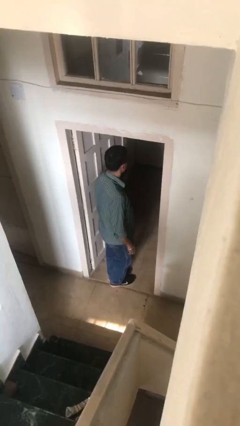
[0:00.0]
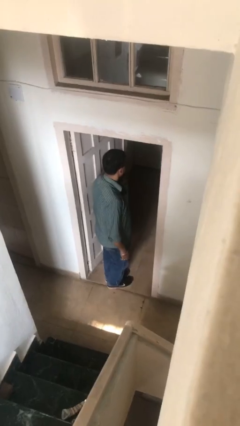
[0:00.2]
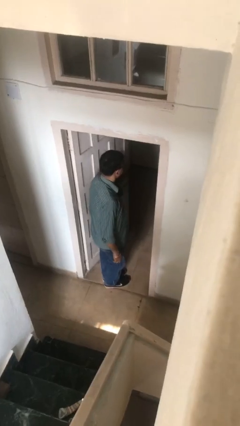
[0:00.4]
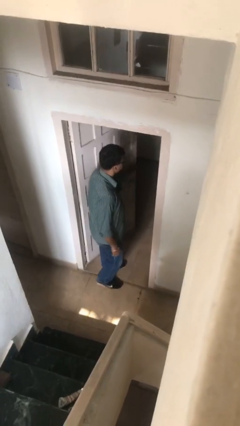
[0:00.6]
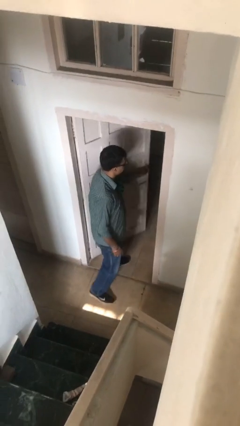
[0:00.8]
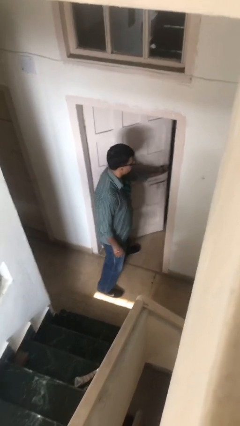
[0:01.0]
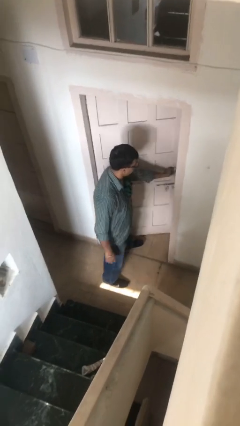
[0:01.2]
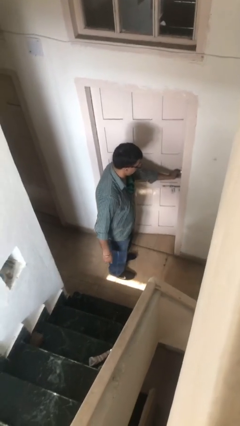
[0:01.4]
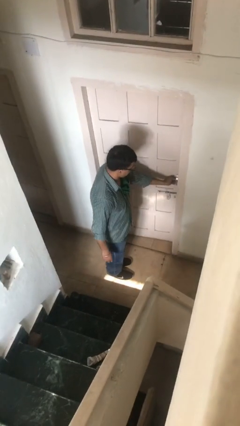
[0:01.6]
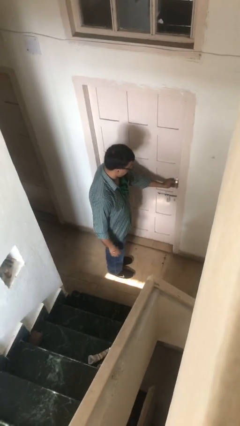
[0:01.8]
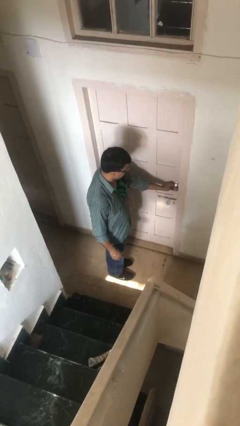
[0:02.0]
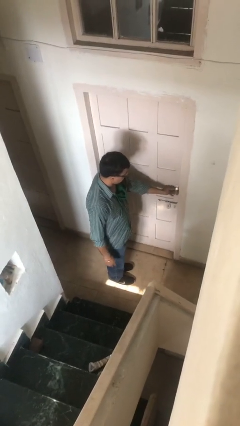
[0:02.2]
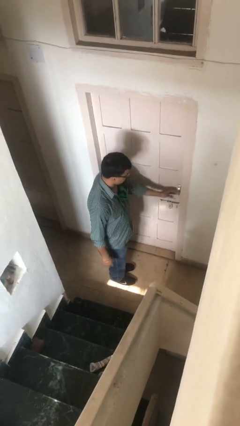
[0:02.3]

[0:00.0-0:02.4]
person closes facility door

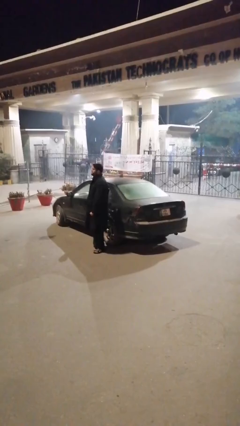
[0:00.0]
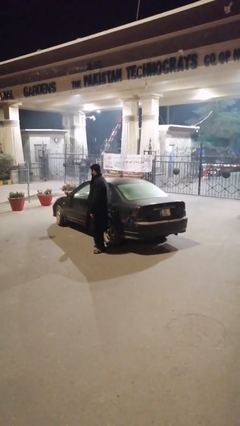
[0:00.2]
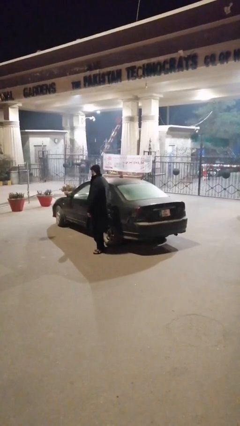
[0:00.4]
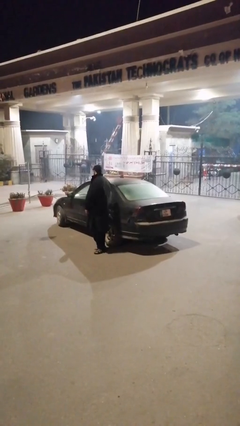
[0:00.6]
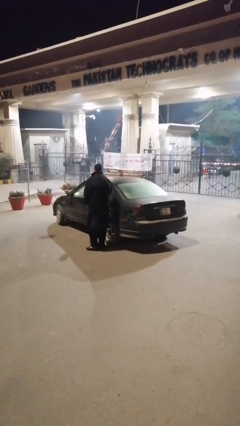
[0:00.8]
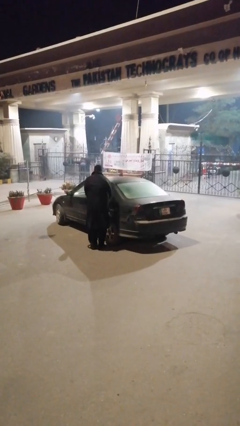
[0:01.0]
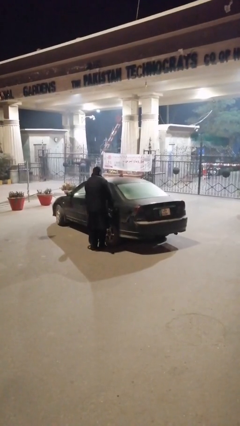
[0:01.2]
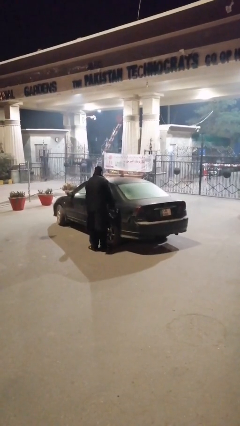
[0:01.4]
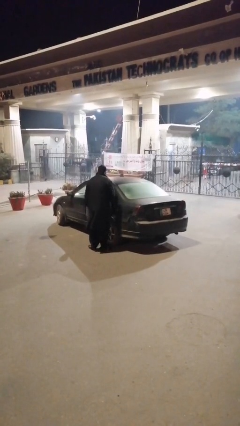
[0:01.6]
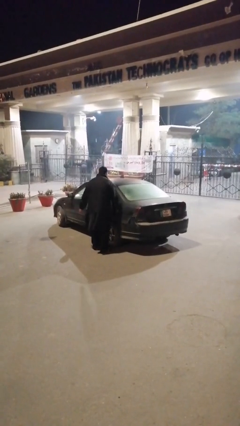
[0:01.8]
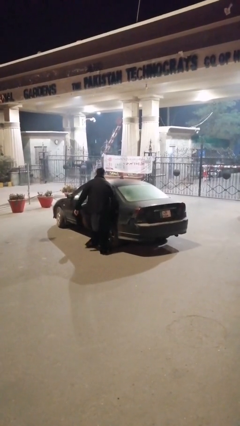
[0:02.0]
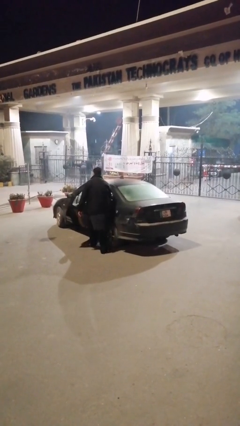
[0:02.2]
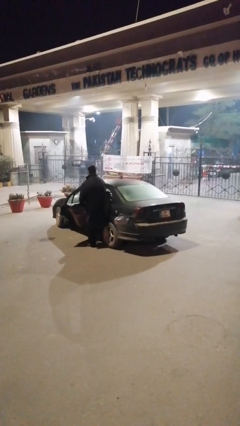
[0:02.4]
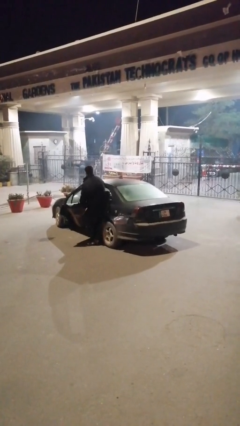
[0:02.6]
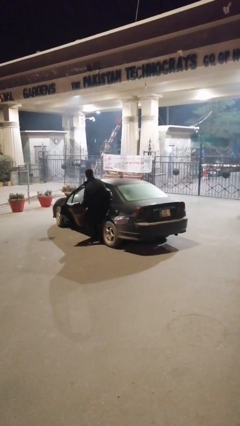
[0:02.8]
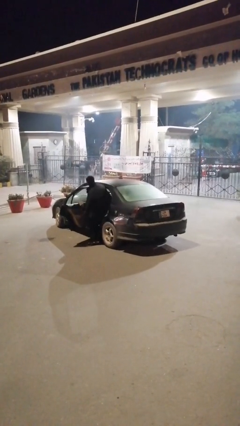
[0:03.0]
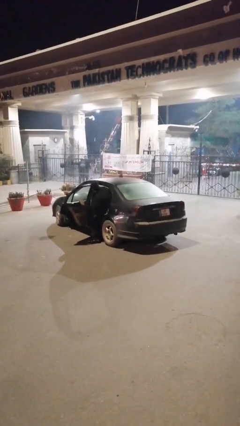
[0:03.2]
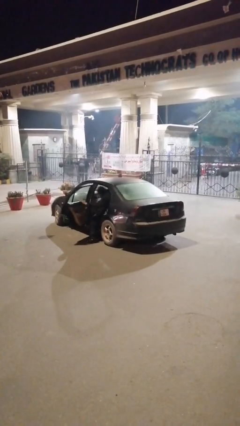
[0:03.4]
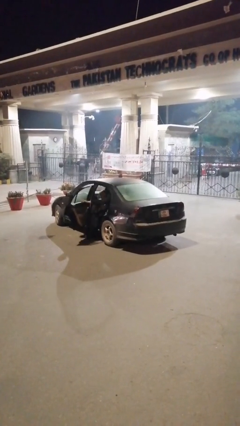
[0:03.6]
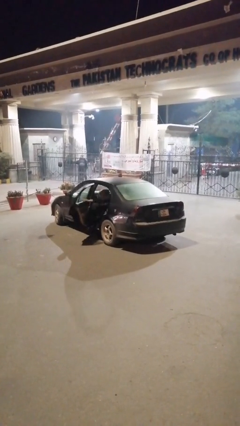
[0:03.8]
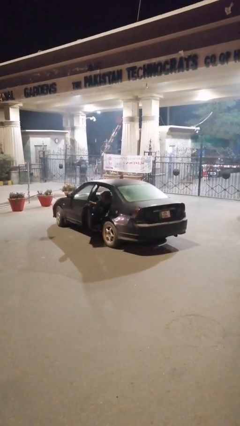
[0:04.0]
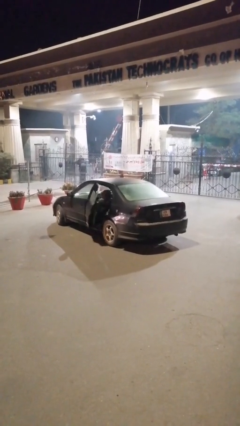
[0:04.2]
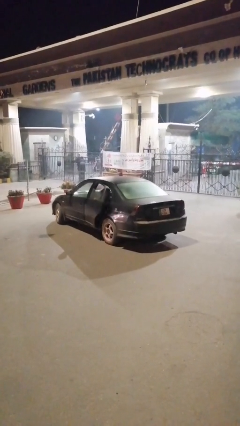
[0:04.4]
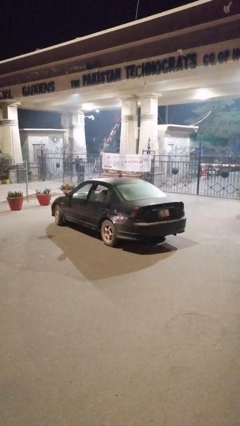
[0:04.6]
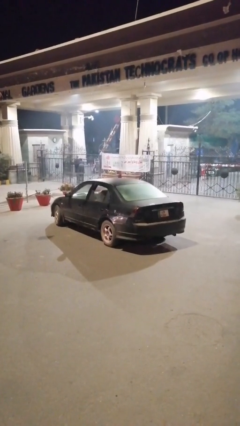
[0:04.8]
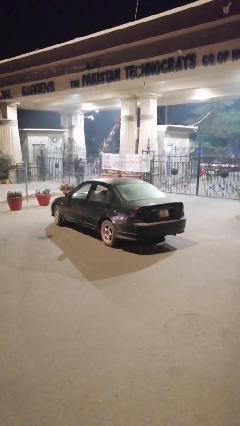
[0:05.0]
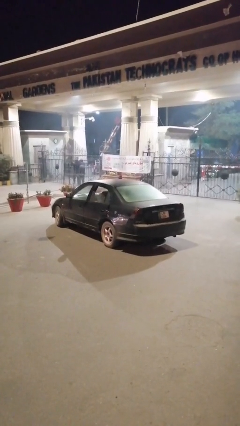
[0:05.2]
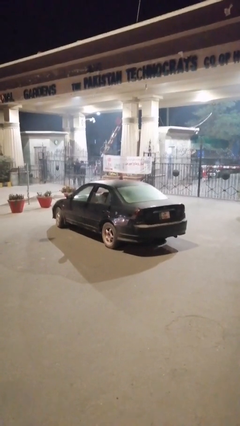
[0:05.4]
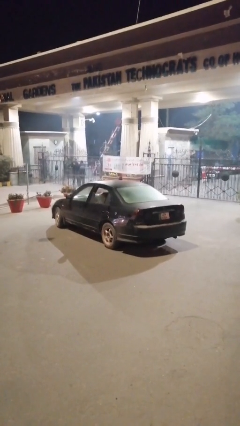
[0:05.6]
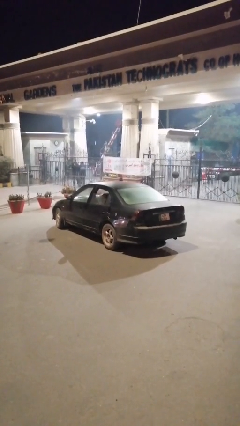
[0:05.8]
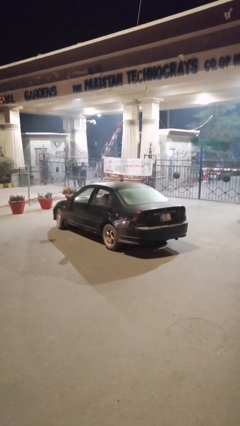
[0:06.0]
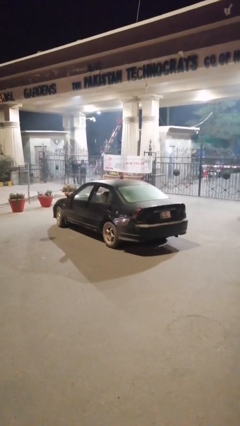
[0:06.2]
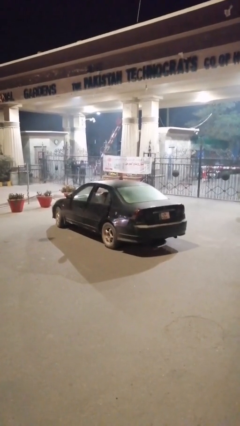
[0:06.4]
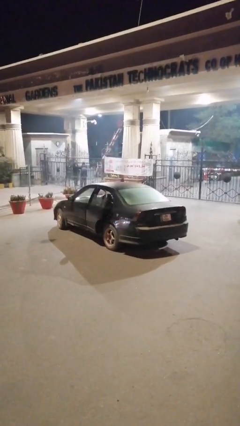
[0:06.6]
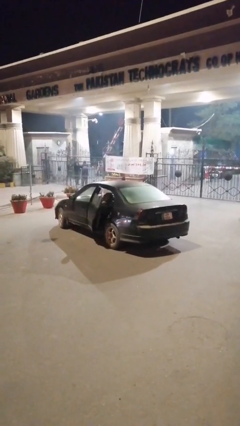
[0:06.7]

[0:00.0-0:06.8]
car picks up person

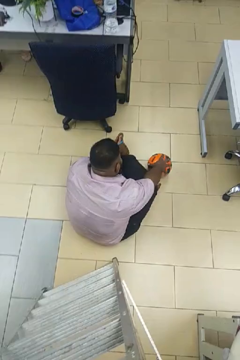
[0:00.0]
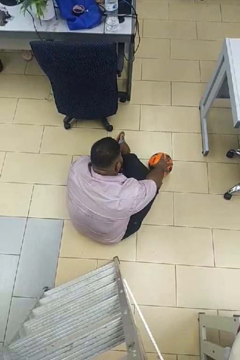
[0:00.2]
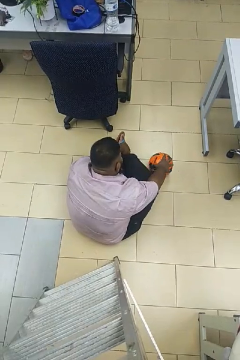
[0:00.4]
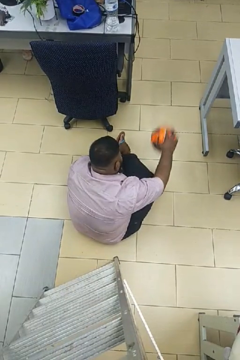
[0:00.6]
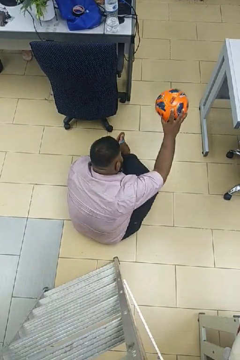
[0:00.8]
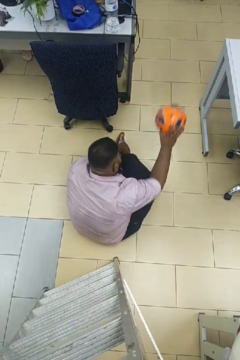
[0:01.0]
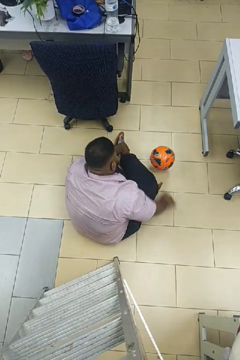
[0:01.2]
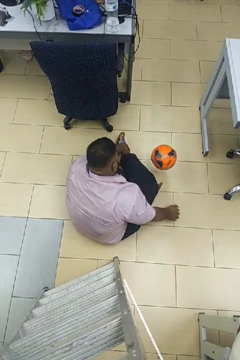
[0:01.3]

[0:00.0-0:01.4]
person bounces ball on floor

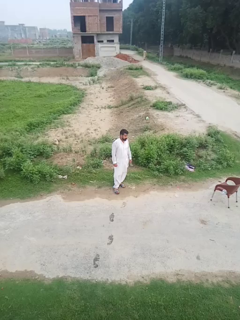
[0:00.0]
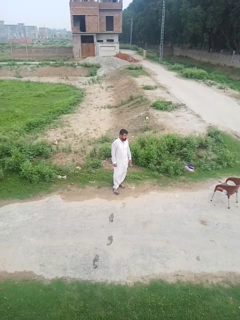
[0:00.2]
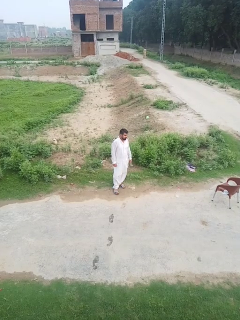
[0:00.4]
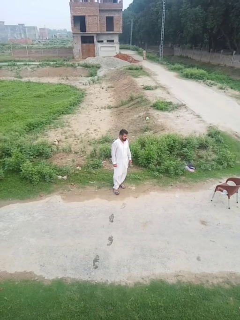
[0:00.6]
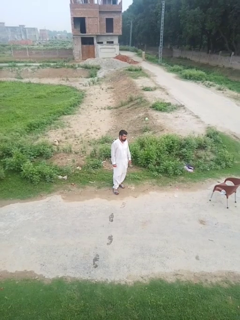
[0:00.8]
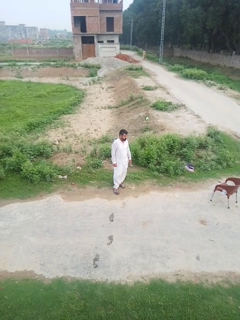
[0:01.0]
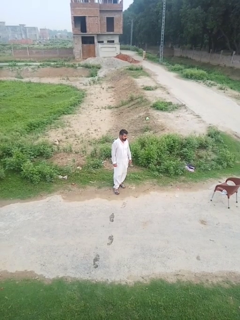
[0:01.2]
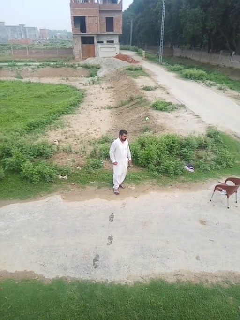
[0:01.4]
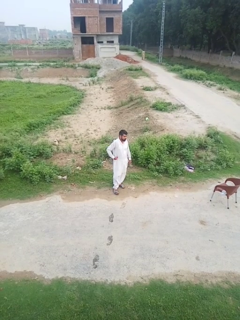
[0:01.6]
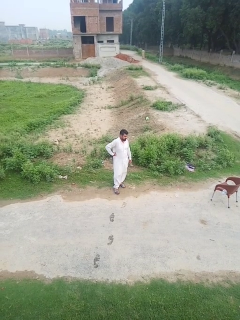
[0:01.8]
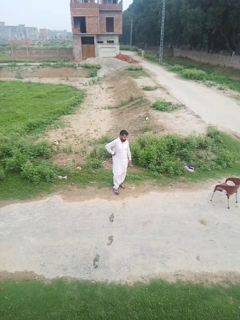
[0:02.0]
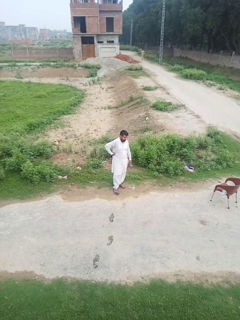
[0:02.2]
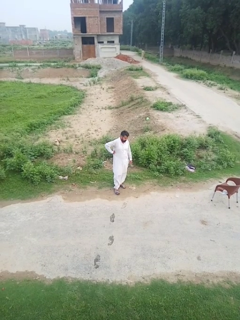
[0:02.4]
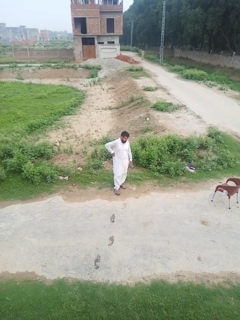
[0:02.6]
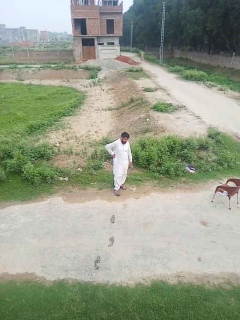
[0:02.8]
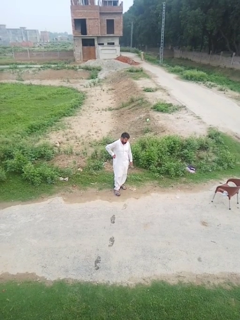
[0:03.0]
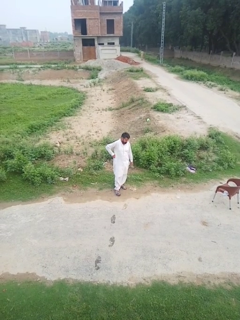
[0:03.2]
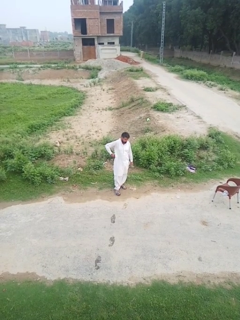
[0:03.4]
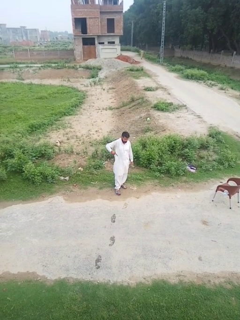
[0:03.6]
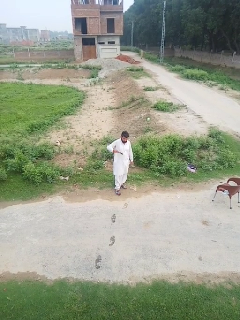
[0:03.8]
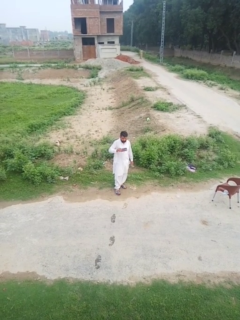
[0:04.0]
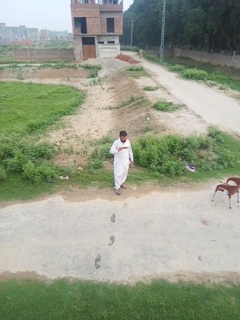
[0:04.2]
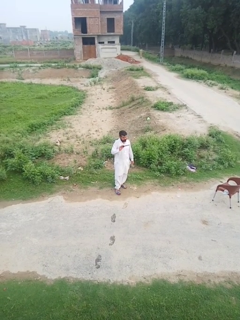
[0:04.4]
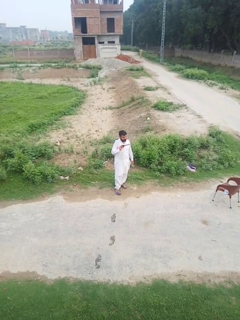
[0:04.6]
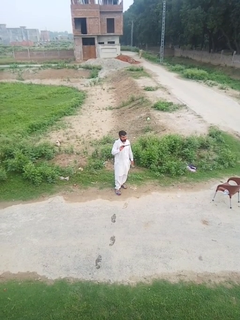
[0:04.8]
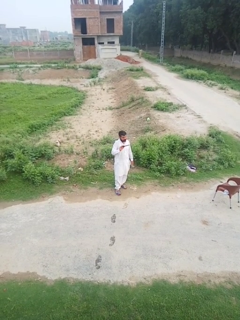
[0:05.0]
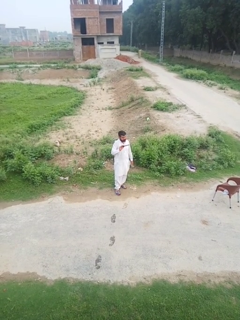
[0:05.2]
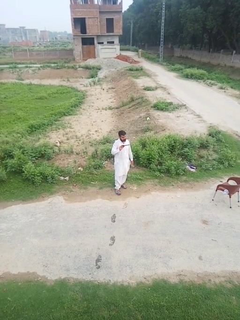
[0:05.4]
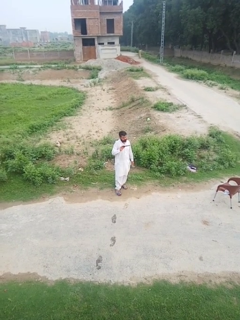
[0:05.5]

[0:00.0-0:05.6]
person takes phone from pocket

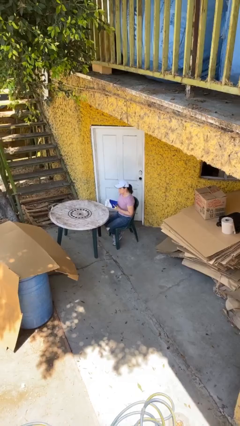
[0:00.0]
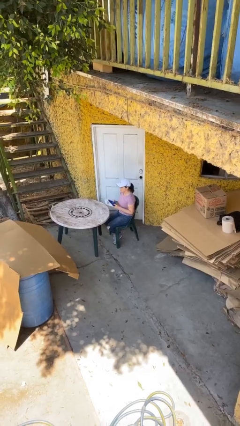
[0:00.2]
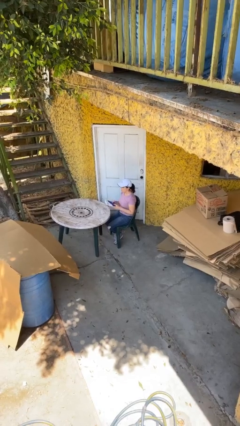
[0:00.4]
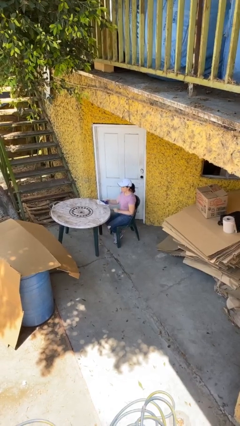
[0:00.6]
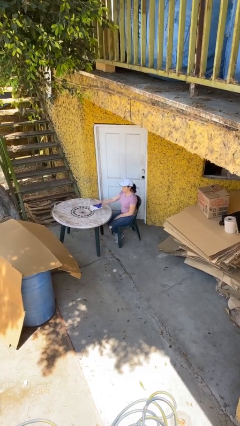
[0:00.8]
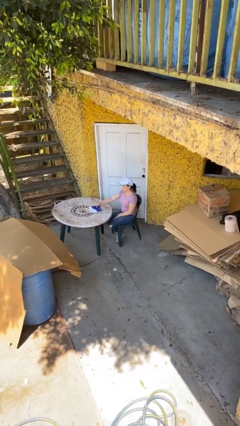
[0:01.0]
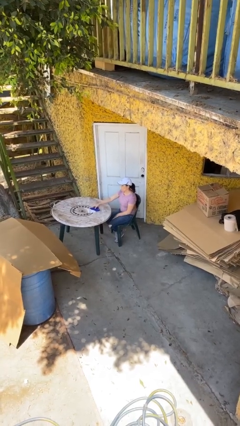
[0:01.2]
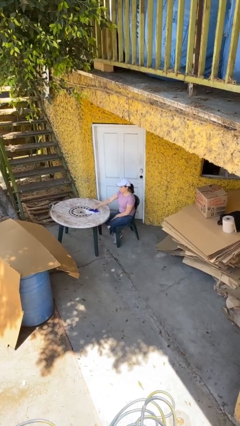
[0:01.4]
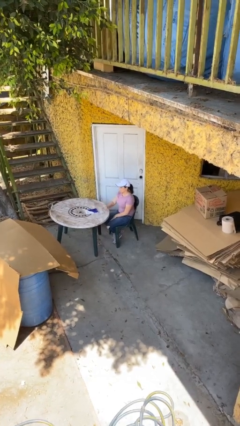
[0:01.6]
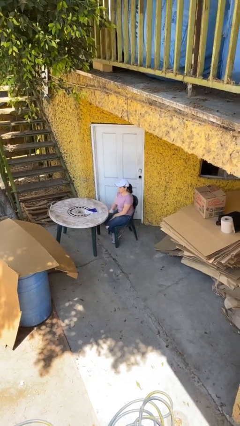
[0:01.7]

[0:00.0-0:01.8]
person puts down object on table

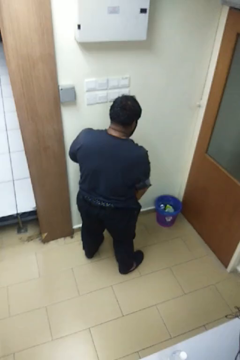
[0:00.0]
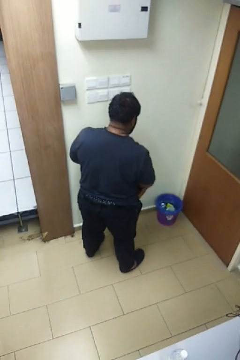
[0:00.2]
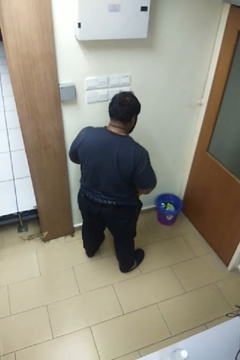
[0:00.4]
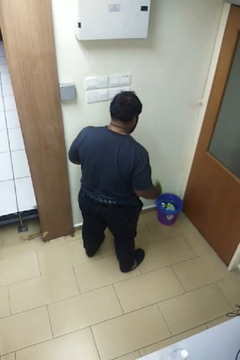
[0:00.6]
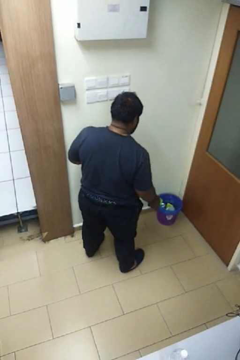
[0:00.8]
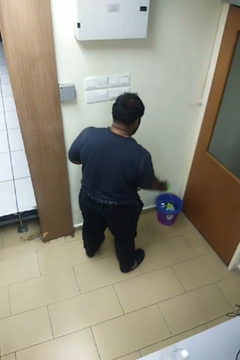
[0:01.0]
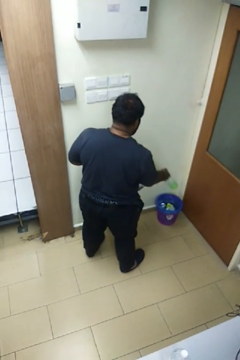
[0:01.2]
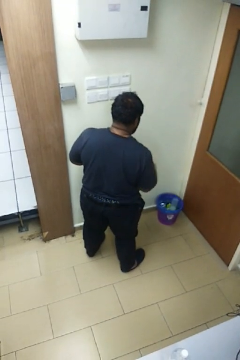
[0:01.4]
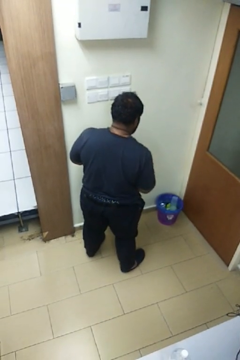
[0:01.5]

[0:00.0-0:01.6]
person discards trash
